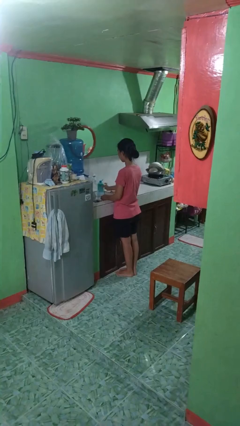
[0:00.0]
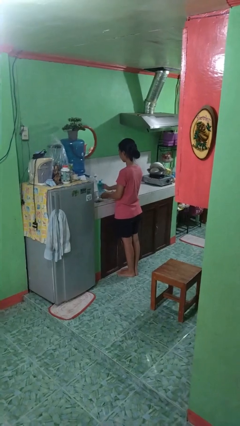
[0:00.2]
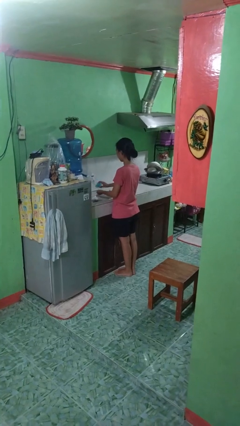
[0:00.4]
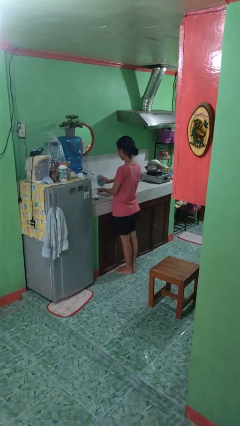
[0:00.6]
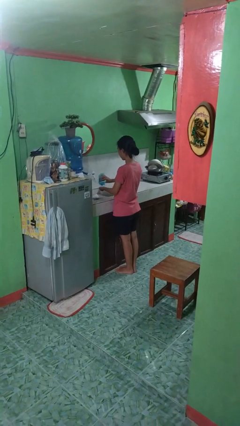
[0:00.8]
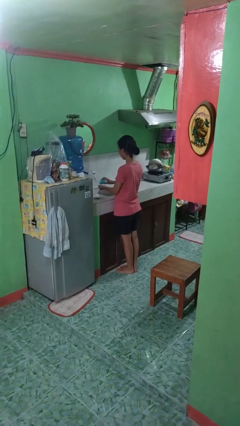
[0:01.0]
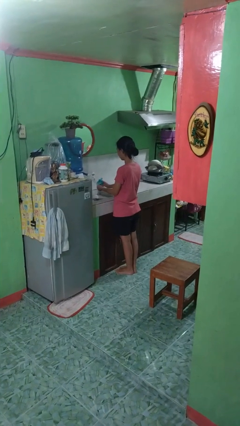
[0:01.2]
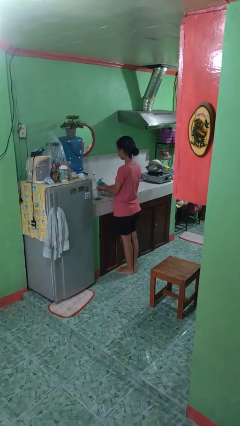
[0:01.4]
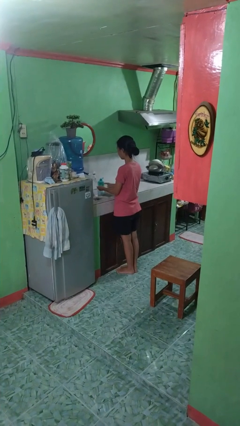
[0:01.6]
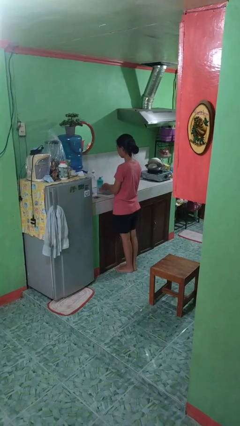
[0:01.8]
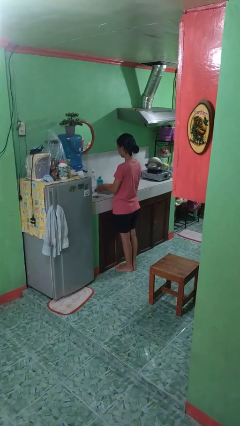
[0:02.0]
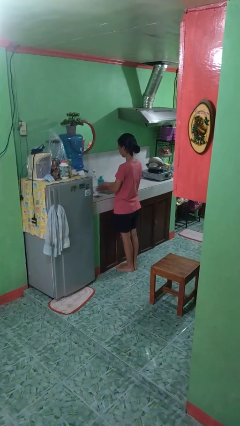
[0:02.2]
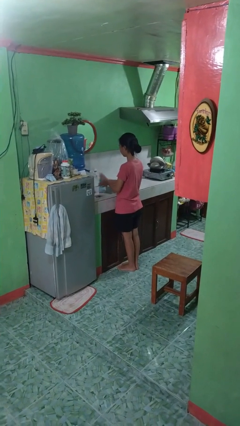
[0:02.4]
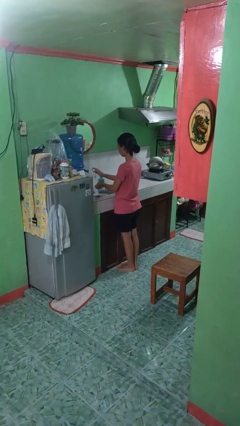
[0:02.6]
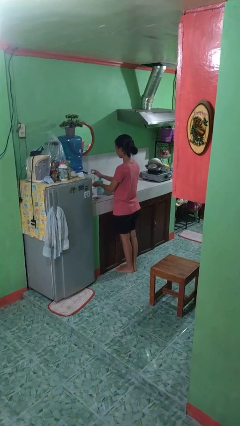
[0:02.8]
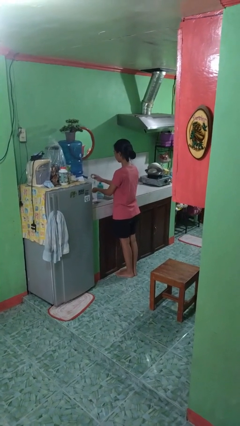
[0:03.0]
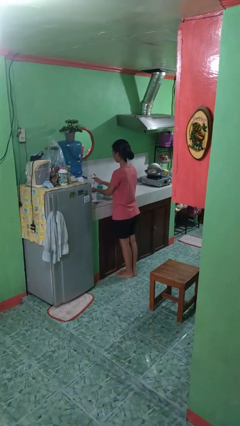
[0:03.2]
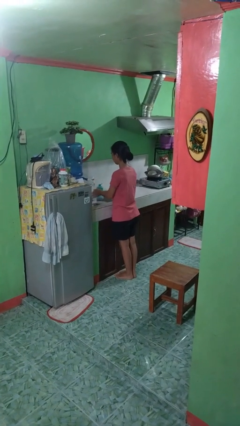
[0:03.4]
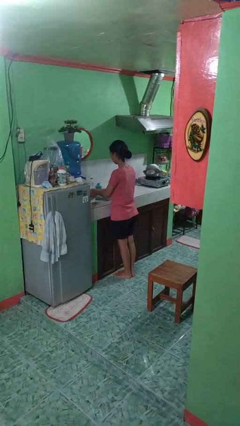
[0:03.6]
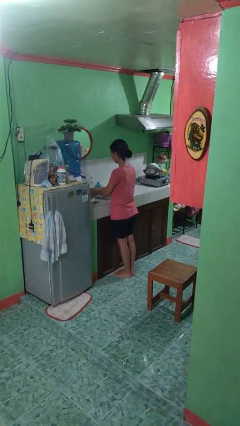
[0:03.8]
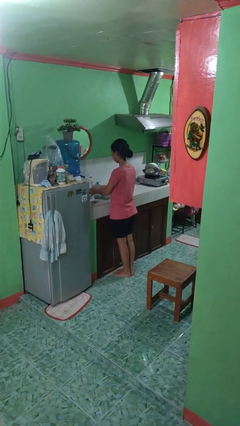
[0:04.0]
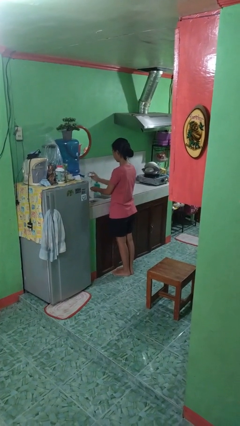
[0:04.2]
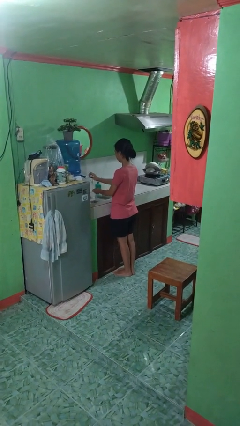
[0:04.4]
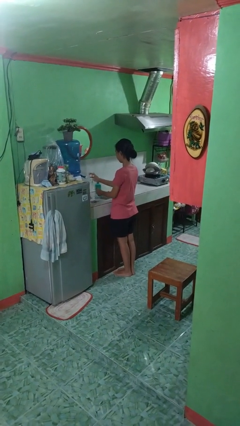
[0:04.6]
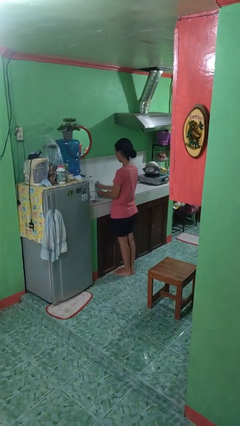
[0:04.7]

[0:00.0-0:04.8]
person washes hands

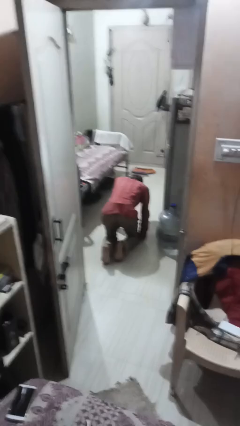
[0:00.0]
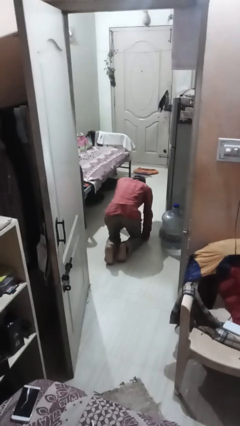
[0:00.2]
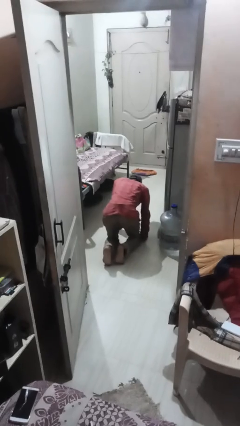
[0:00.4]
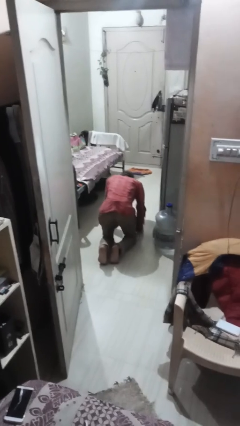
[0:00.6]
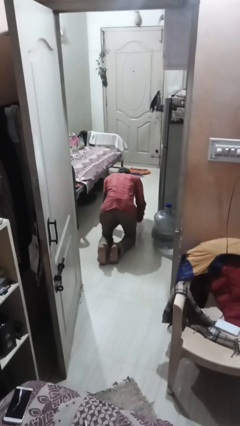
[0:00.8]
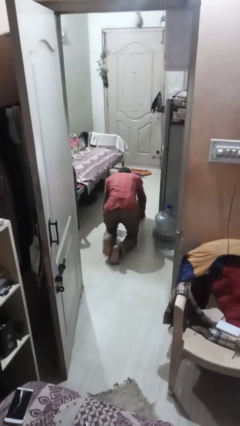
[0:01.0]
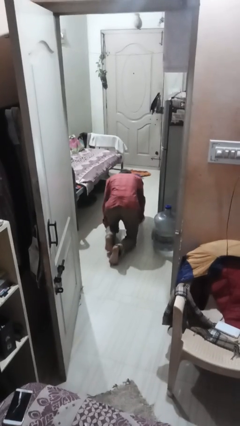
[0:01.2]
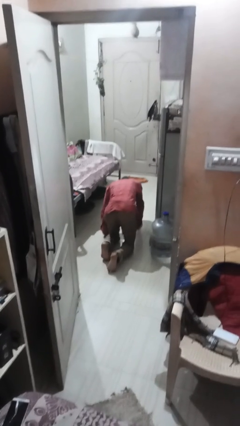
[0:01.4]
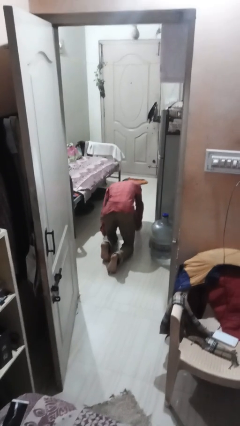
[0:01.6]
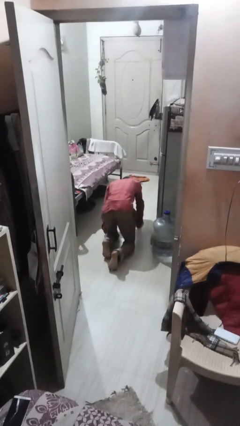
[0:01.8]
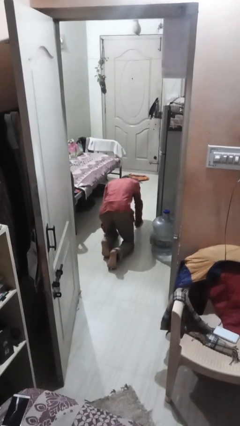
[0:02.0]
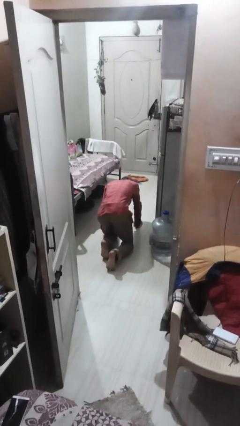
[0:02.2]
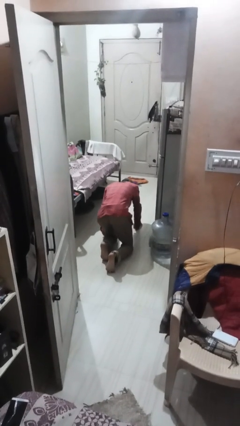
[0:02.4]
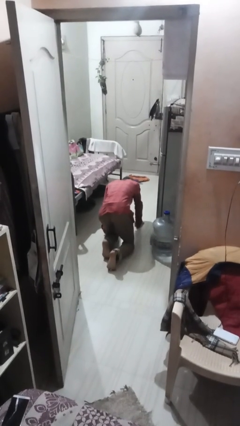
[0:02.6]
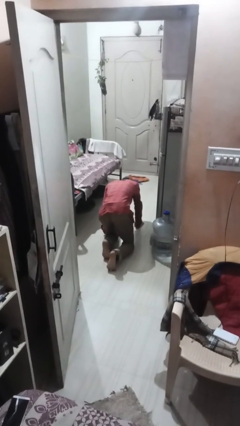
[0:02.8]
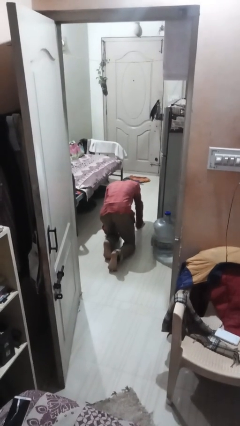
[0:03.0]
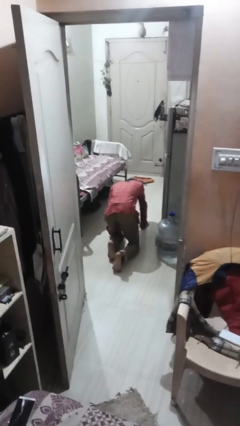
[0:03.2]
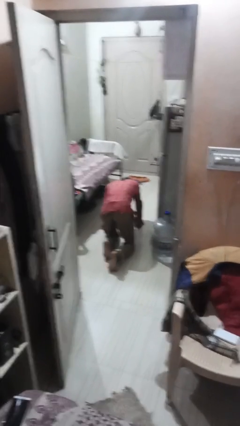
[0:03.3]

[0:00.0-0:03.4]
person crawls

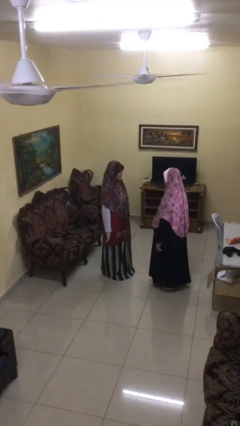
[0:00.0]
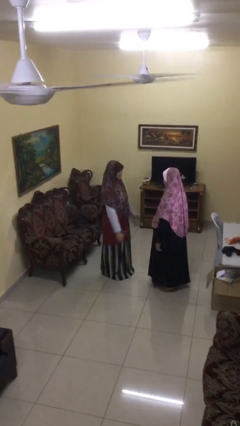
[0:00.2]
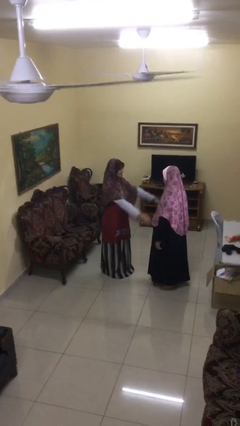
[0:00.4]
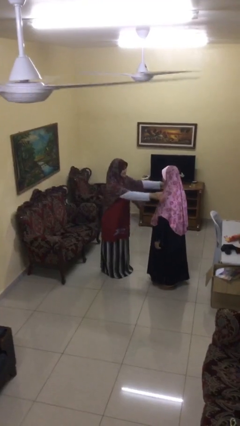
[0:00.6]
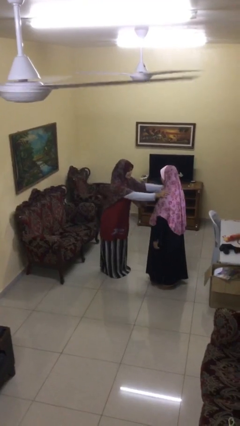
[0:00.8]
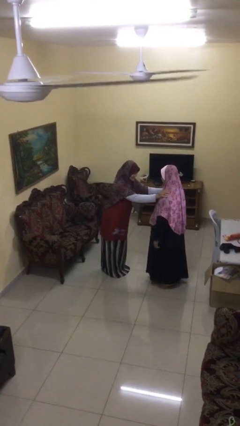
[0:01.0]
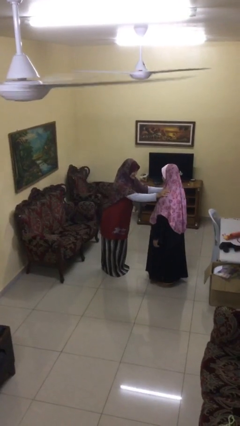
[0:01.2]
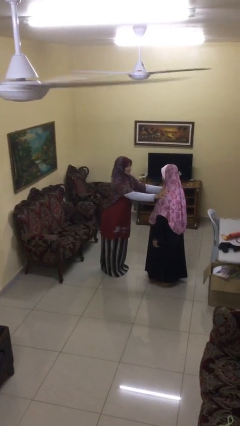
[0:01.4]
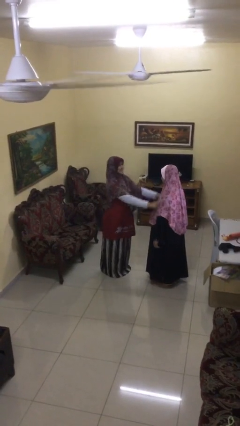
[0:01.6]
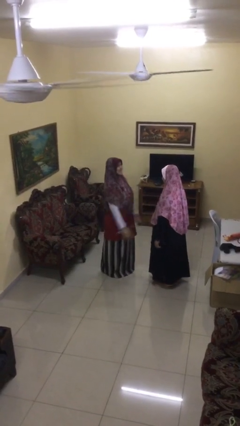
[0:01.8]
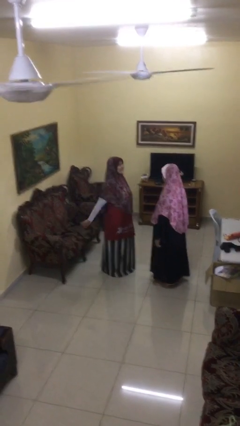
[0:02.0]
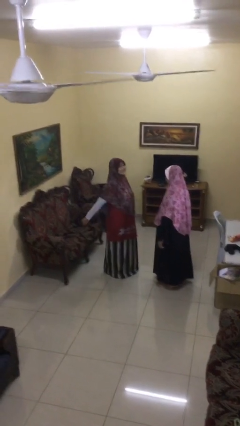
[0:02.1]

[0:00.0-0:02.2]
person pounds shoulders of person

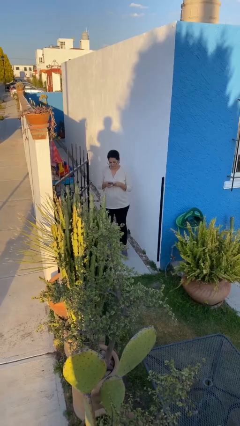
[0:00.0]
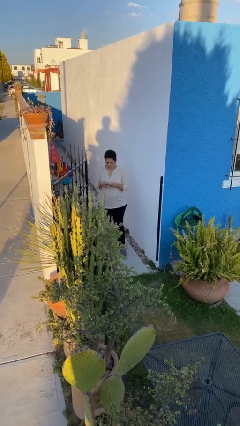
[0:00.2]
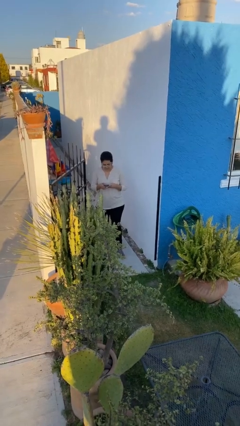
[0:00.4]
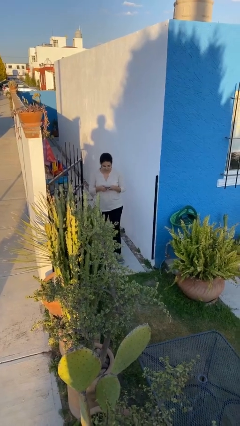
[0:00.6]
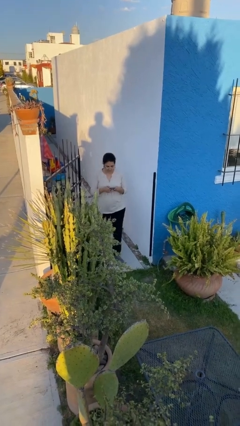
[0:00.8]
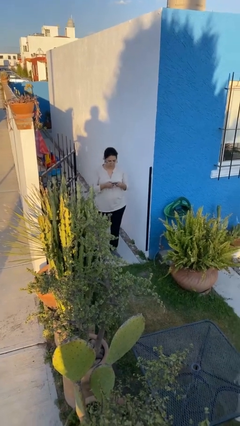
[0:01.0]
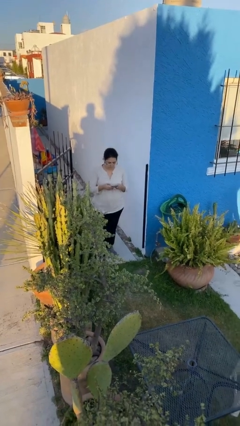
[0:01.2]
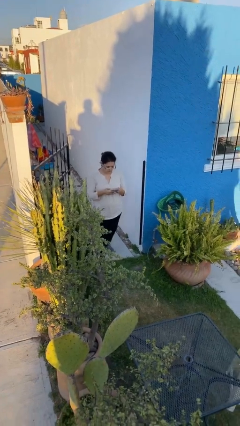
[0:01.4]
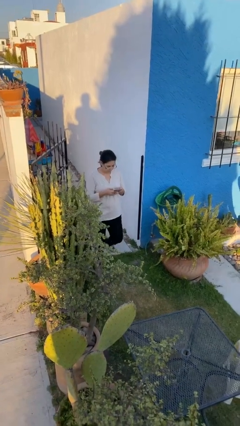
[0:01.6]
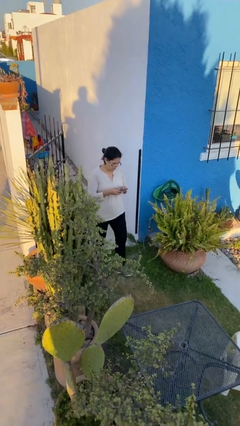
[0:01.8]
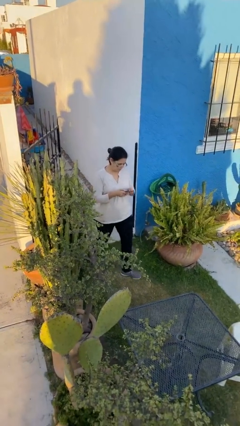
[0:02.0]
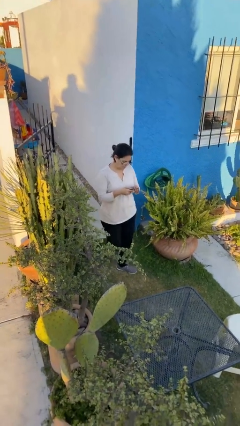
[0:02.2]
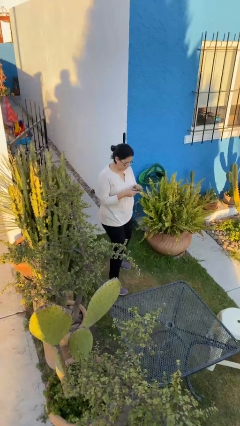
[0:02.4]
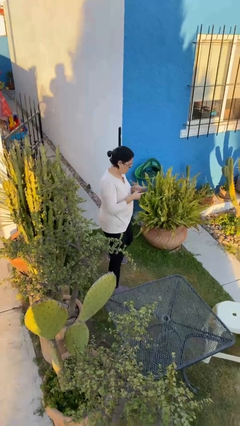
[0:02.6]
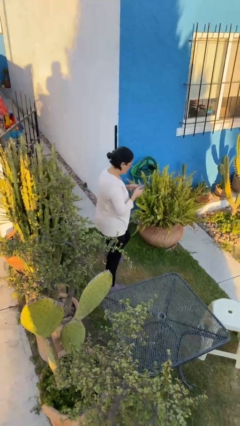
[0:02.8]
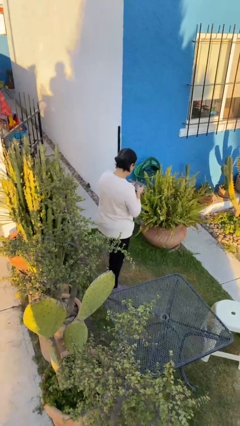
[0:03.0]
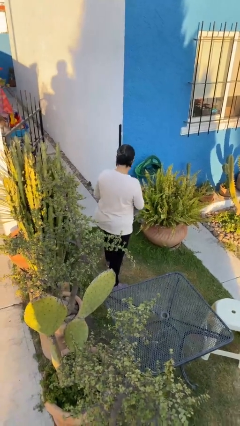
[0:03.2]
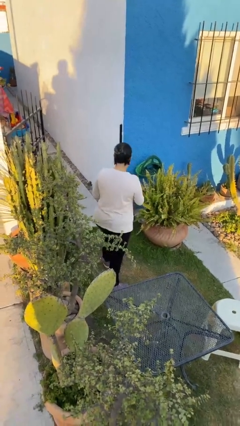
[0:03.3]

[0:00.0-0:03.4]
person enters scene through structure

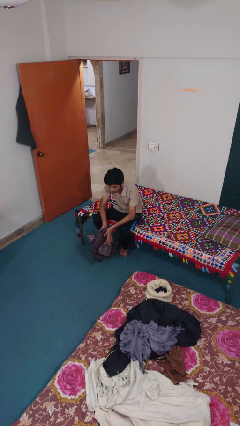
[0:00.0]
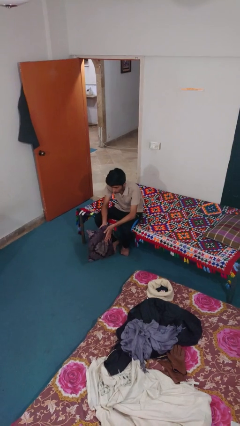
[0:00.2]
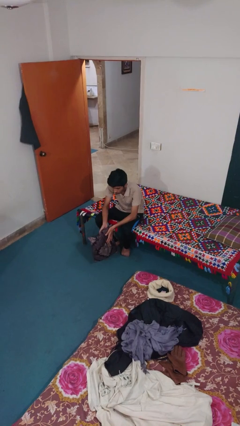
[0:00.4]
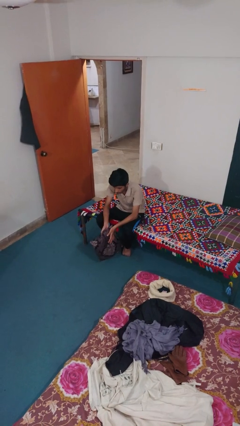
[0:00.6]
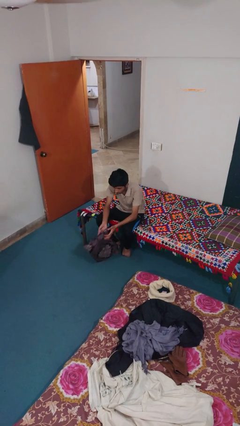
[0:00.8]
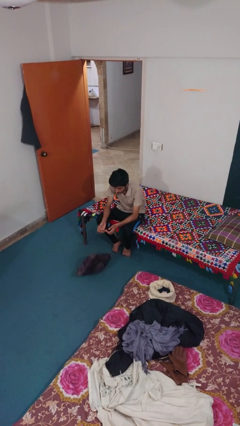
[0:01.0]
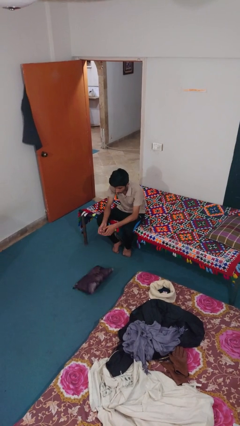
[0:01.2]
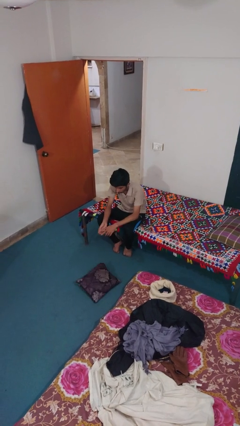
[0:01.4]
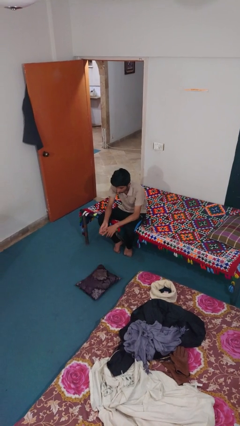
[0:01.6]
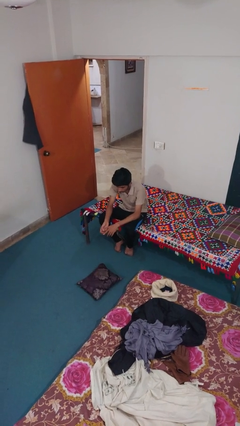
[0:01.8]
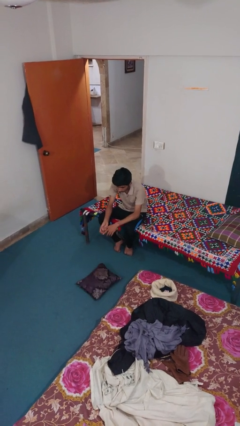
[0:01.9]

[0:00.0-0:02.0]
person drops object

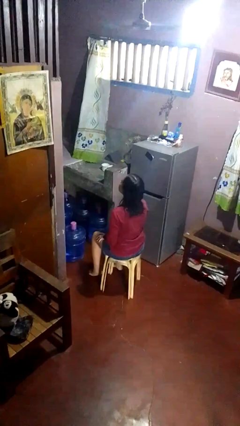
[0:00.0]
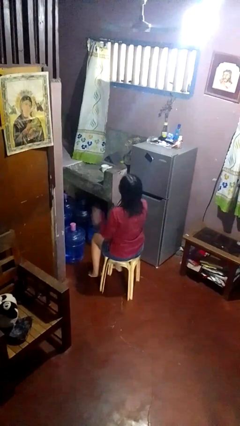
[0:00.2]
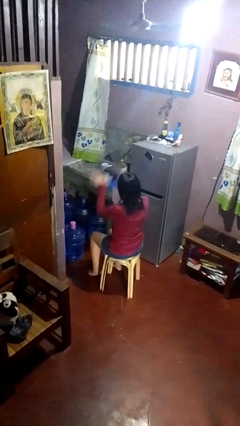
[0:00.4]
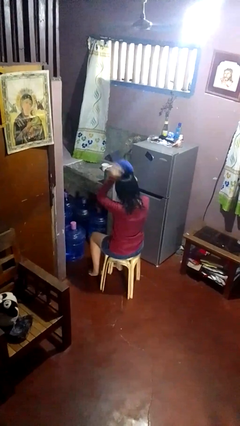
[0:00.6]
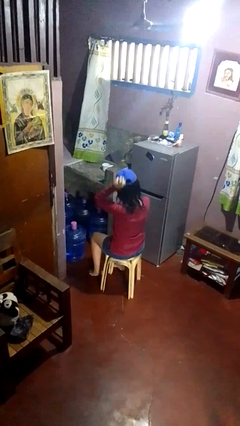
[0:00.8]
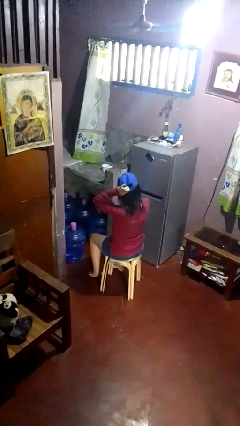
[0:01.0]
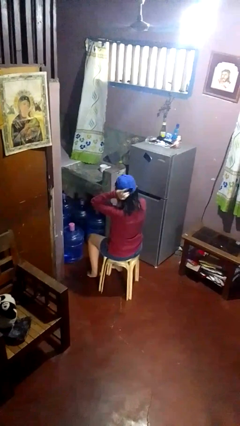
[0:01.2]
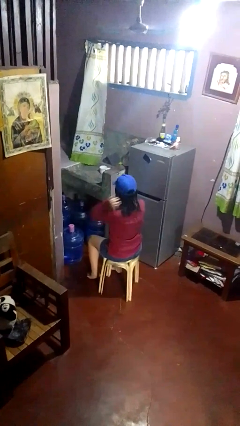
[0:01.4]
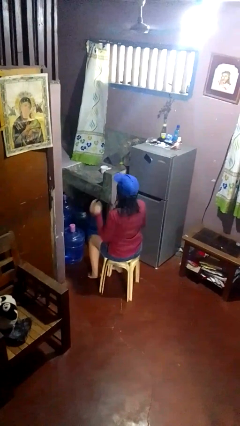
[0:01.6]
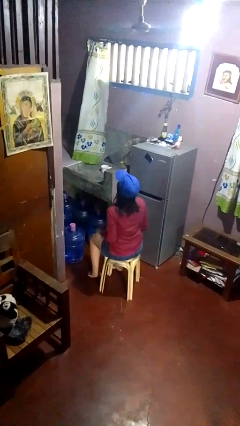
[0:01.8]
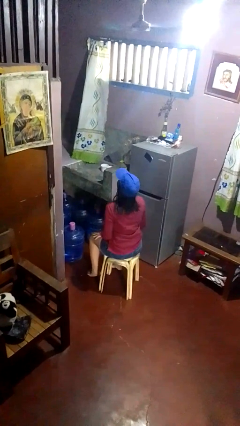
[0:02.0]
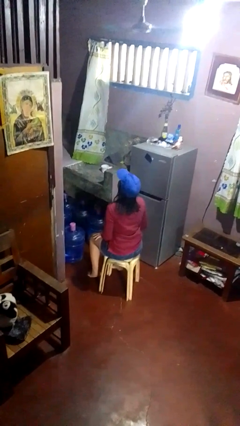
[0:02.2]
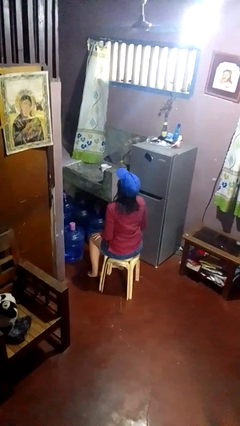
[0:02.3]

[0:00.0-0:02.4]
person puts on hat
